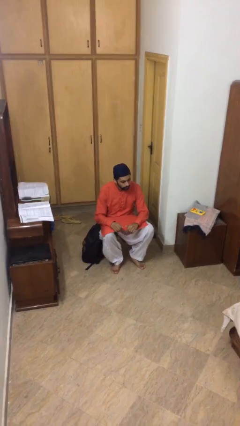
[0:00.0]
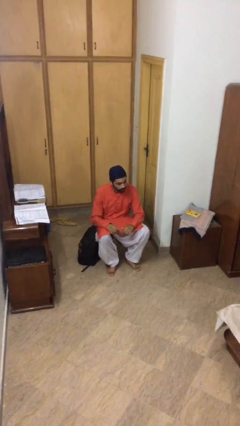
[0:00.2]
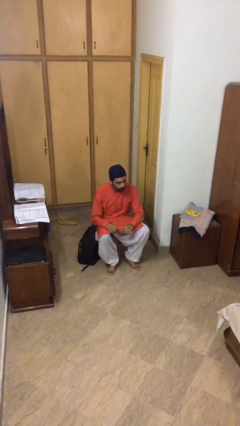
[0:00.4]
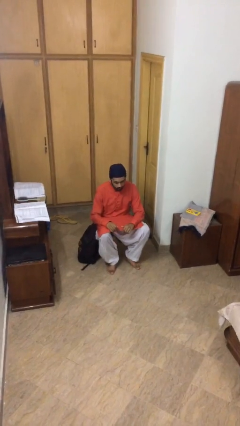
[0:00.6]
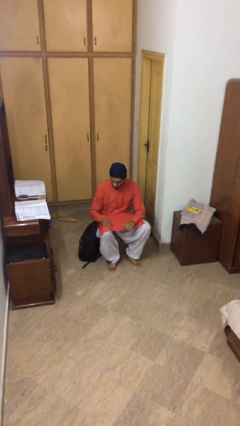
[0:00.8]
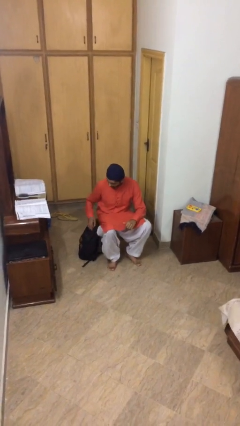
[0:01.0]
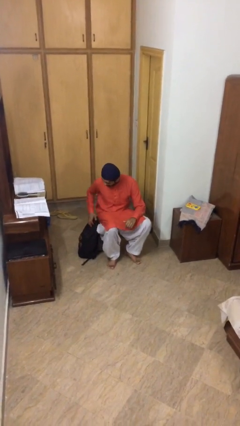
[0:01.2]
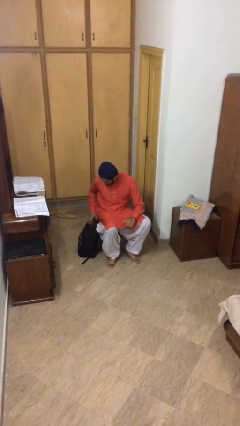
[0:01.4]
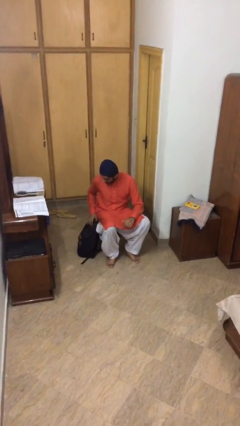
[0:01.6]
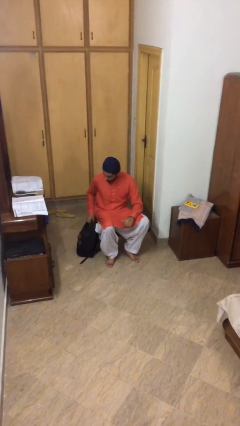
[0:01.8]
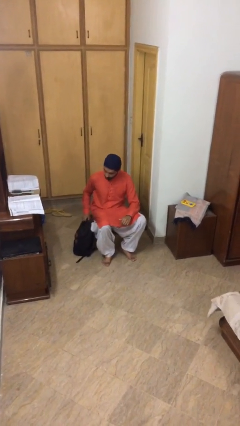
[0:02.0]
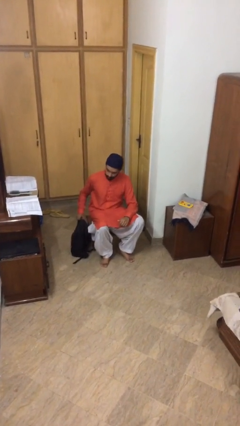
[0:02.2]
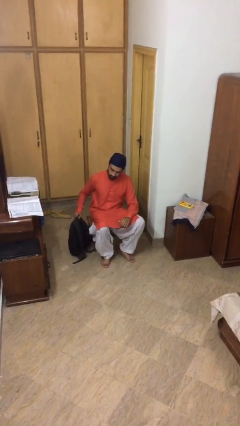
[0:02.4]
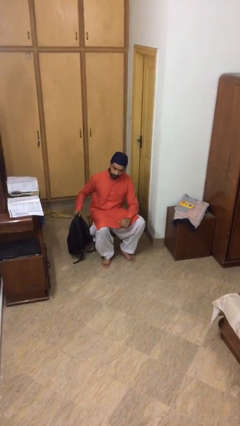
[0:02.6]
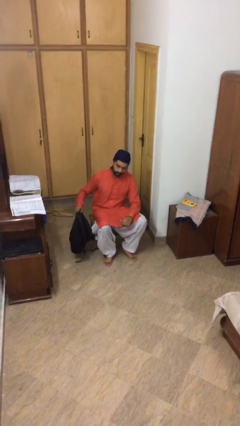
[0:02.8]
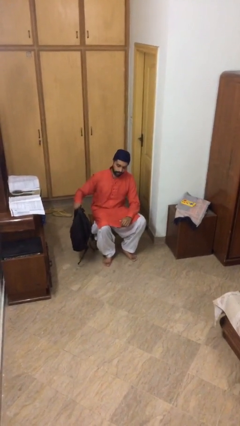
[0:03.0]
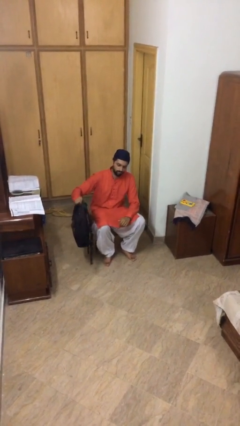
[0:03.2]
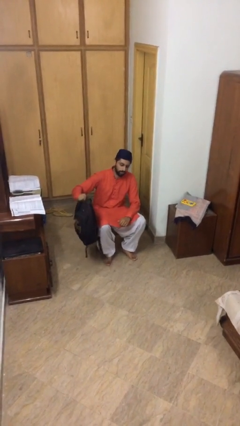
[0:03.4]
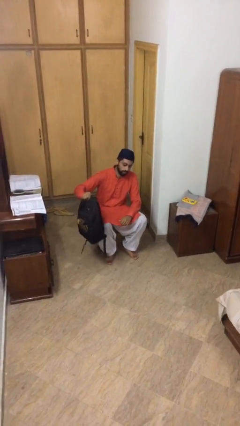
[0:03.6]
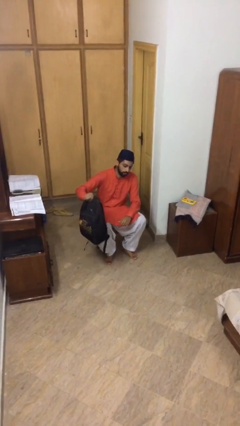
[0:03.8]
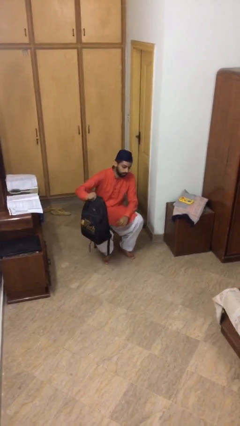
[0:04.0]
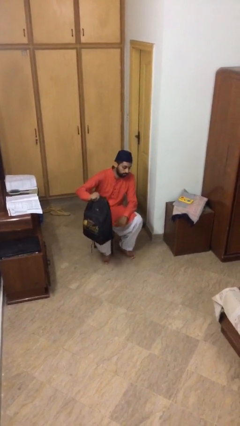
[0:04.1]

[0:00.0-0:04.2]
person picks up object from floor

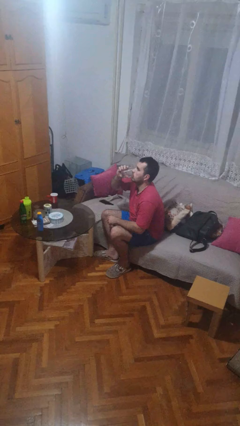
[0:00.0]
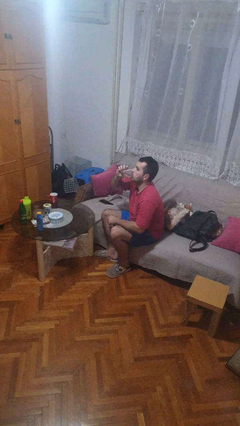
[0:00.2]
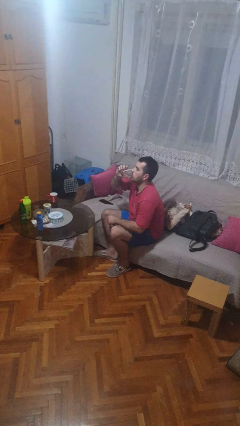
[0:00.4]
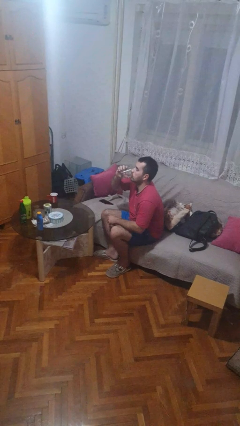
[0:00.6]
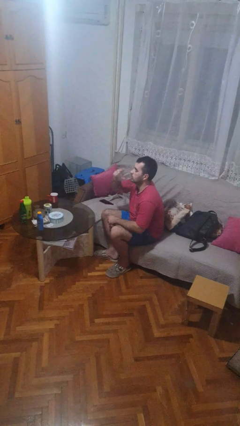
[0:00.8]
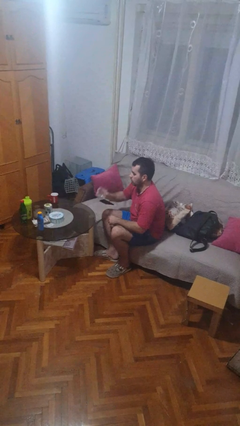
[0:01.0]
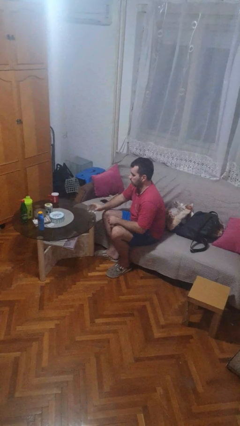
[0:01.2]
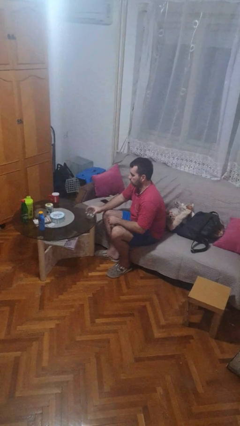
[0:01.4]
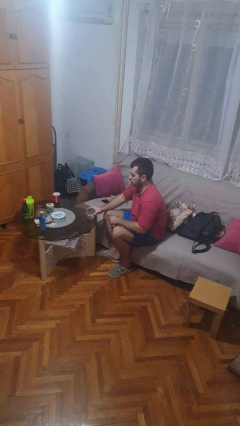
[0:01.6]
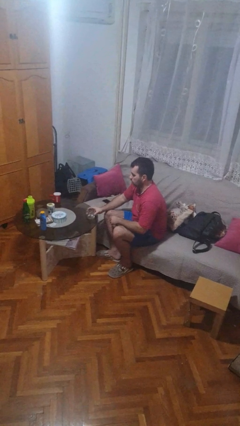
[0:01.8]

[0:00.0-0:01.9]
person puts down object on table

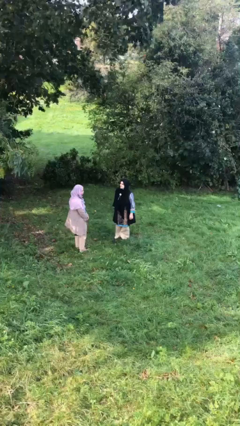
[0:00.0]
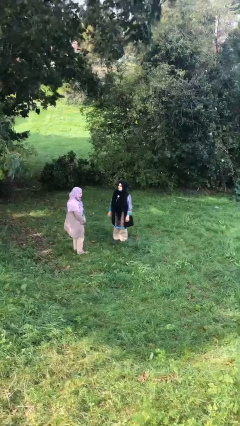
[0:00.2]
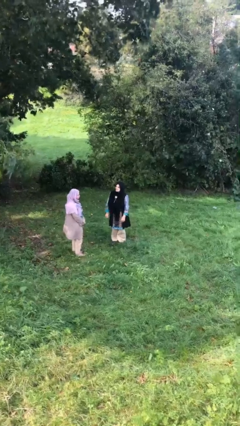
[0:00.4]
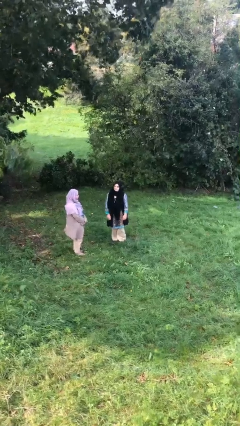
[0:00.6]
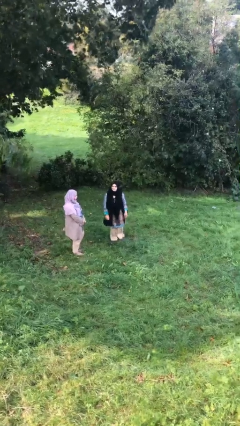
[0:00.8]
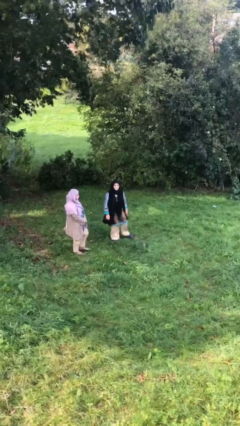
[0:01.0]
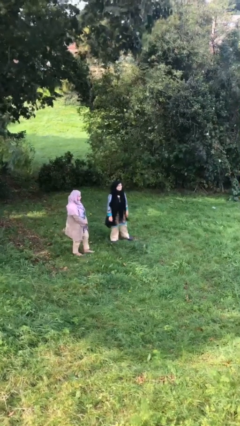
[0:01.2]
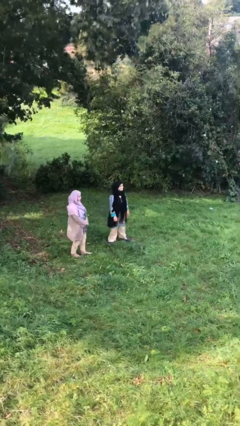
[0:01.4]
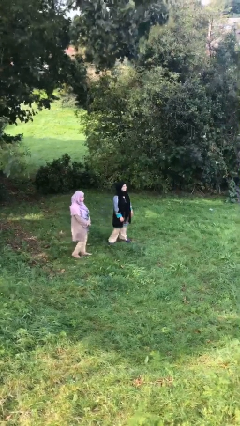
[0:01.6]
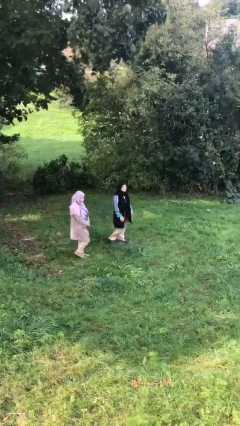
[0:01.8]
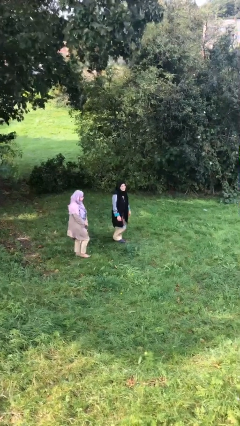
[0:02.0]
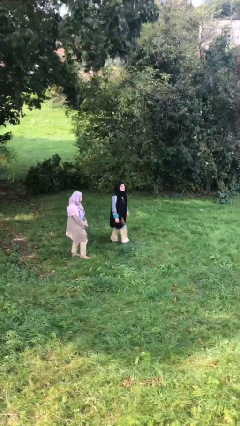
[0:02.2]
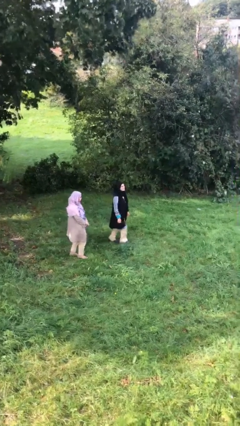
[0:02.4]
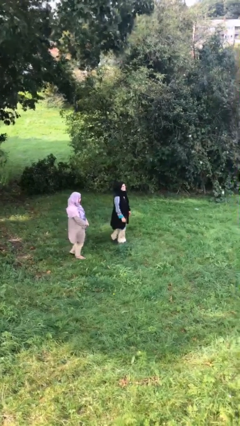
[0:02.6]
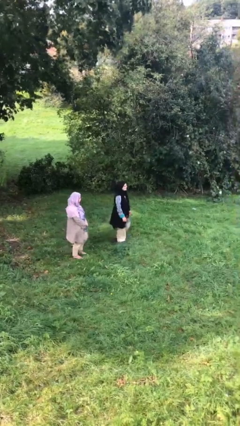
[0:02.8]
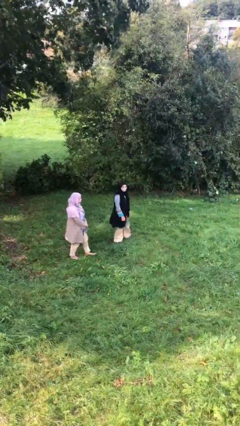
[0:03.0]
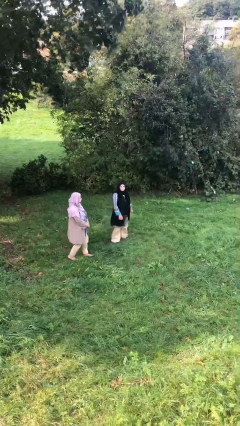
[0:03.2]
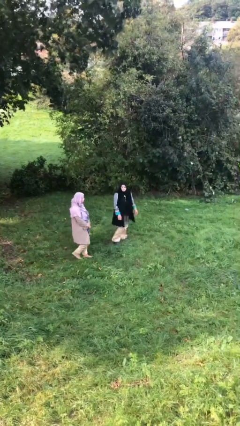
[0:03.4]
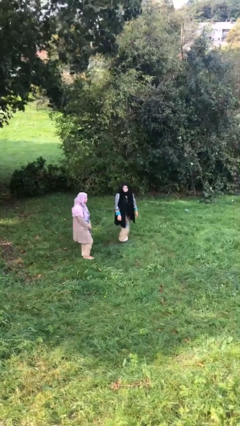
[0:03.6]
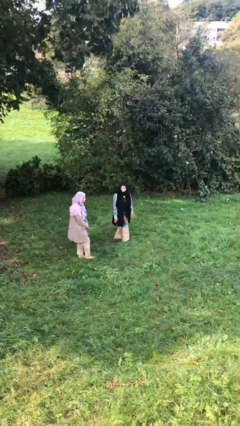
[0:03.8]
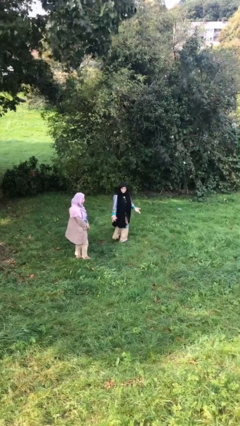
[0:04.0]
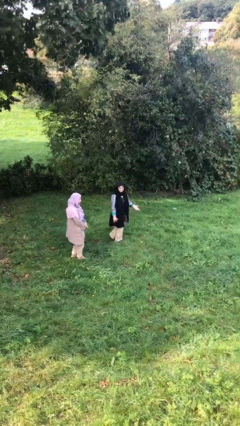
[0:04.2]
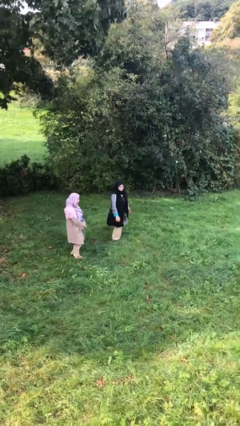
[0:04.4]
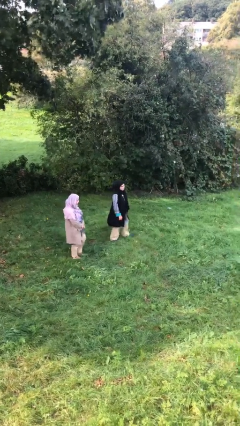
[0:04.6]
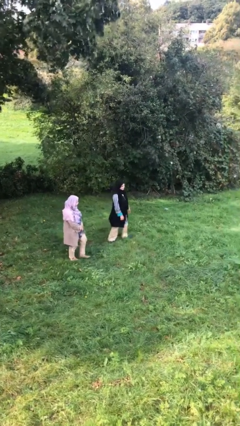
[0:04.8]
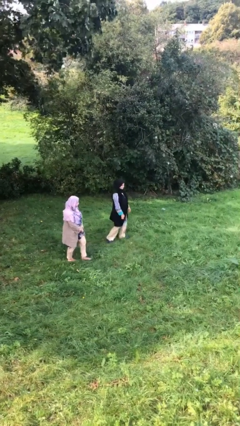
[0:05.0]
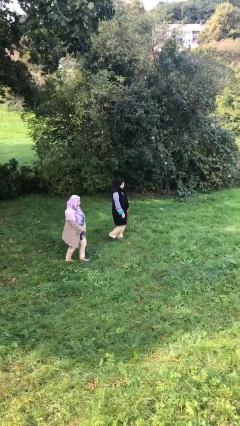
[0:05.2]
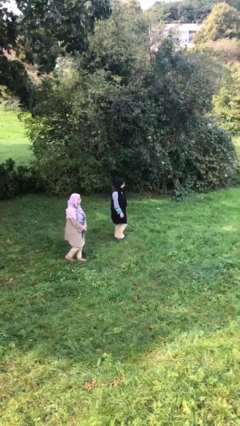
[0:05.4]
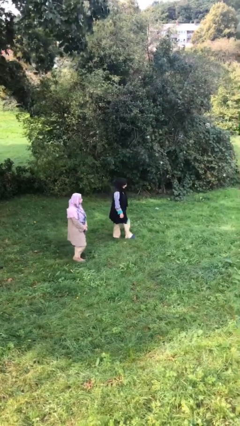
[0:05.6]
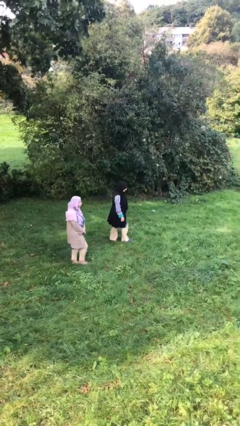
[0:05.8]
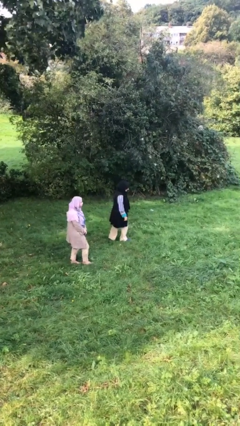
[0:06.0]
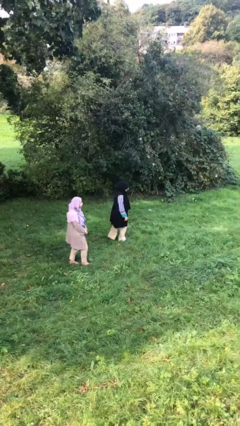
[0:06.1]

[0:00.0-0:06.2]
person talks to person

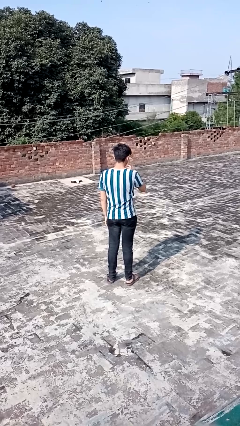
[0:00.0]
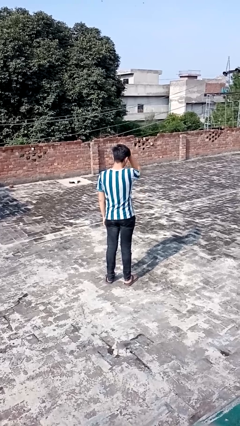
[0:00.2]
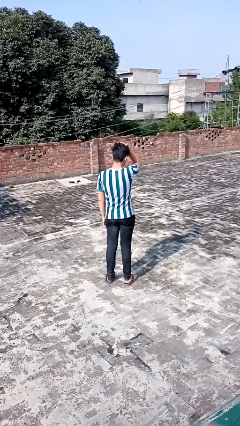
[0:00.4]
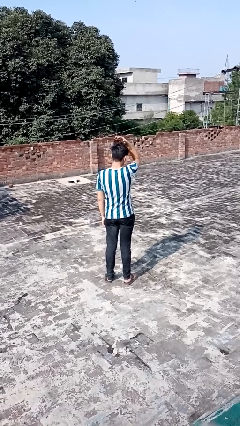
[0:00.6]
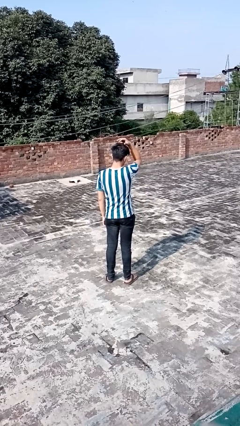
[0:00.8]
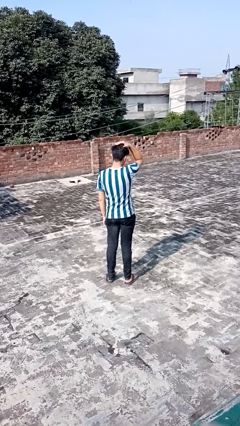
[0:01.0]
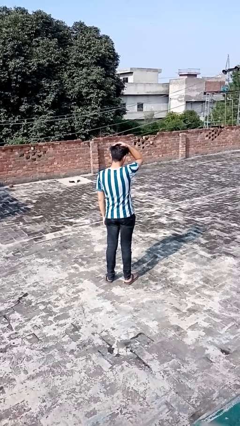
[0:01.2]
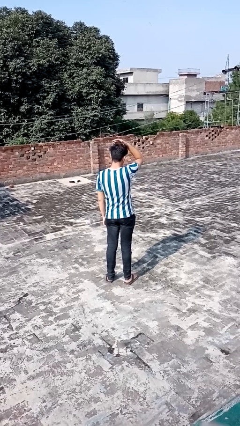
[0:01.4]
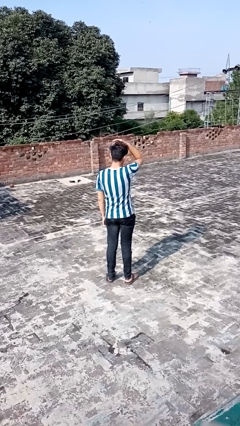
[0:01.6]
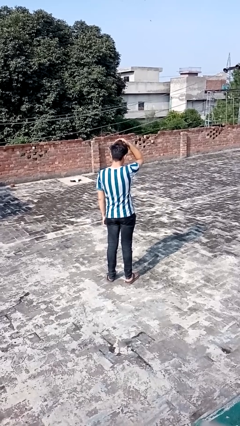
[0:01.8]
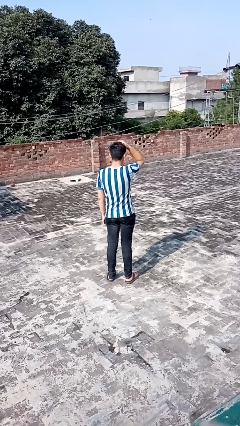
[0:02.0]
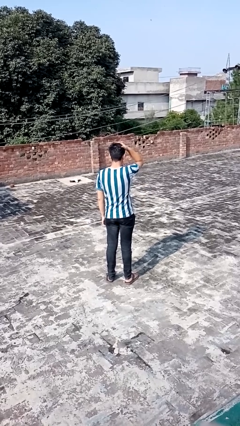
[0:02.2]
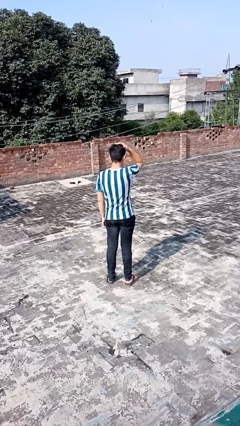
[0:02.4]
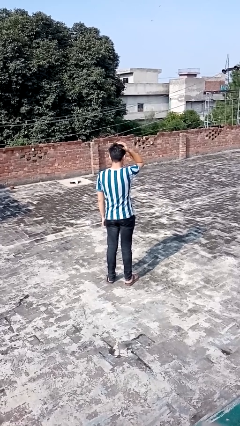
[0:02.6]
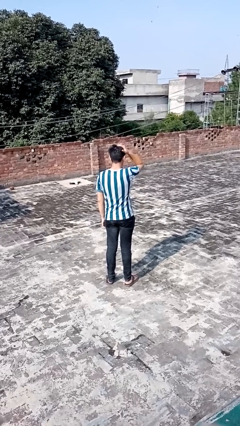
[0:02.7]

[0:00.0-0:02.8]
person pats head

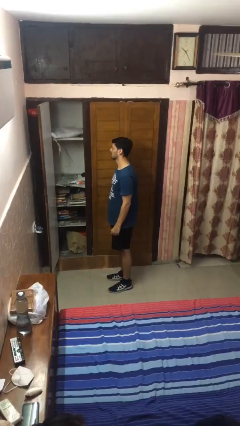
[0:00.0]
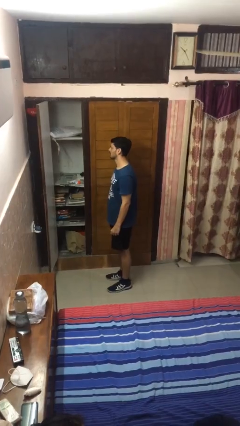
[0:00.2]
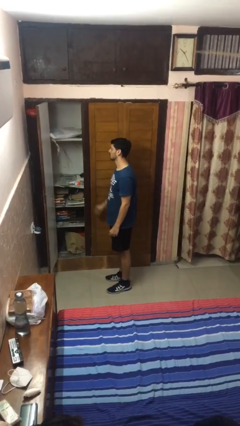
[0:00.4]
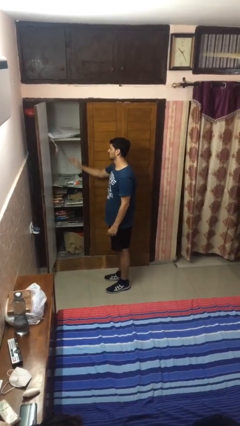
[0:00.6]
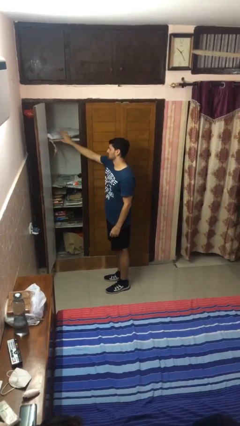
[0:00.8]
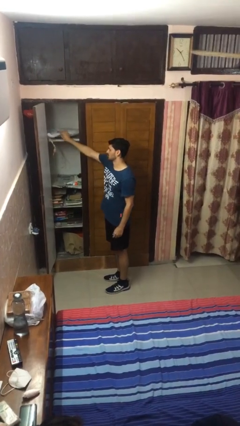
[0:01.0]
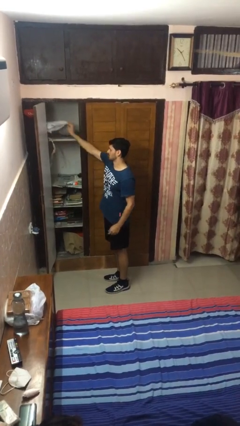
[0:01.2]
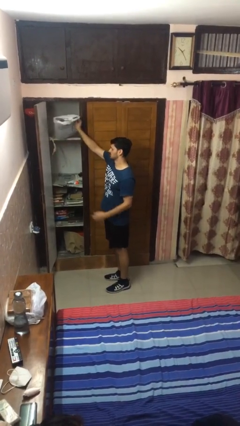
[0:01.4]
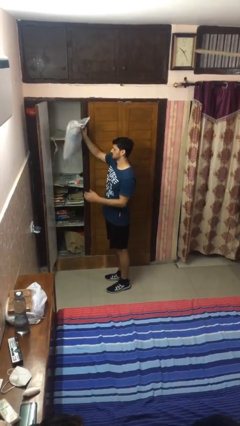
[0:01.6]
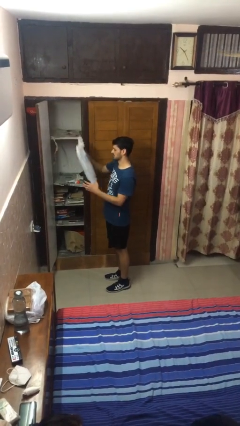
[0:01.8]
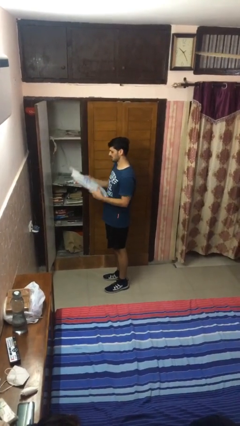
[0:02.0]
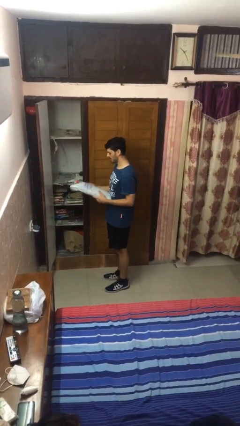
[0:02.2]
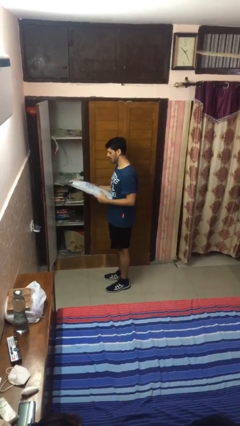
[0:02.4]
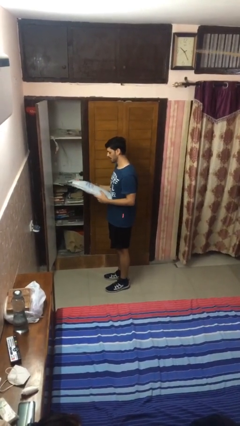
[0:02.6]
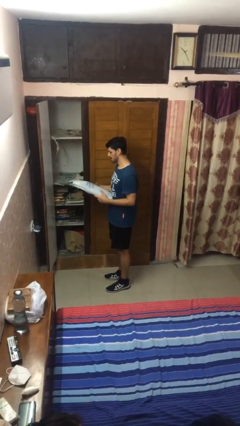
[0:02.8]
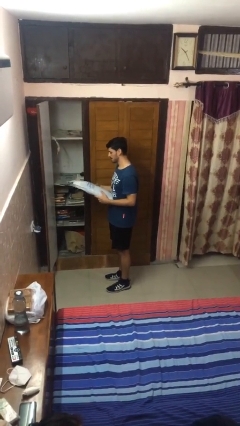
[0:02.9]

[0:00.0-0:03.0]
person picks up object from shelf
